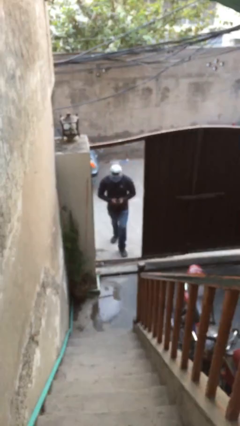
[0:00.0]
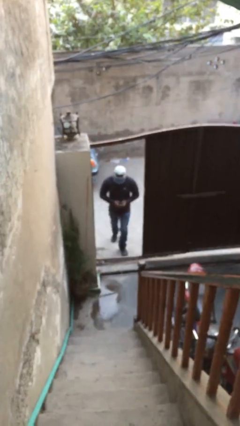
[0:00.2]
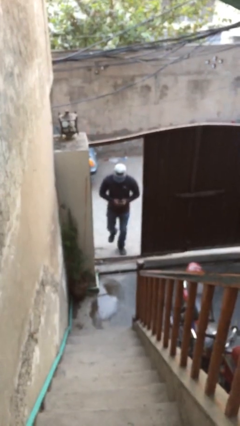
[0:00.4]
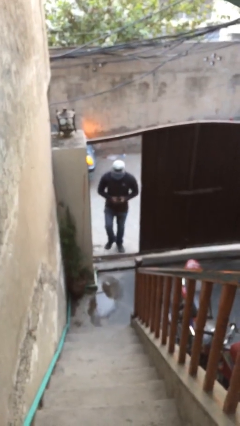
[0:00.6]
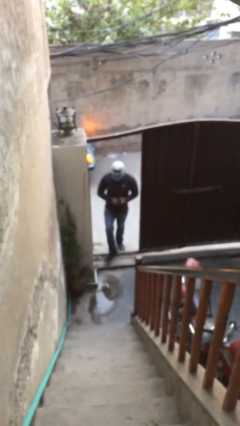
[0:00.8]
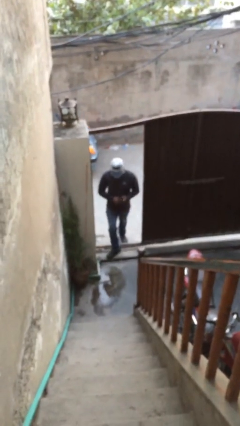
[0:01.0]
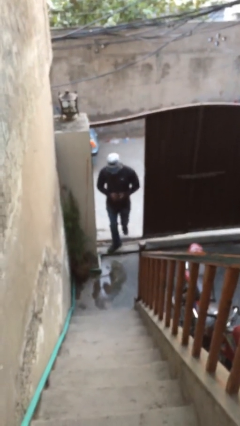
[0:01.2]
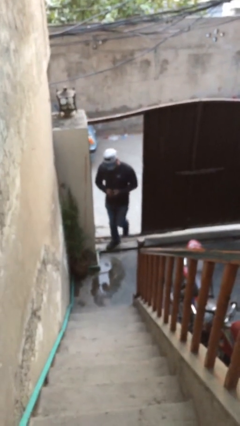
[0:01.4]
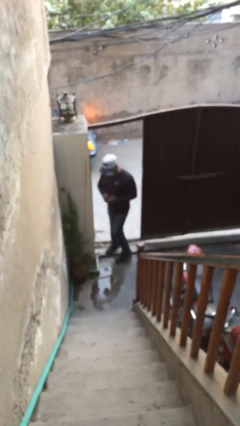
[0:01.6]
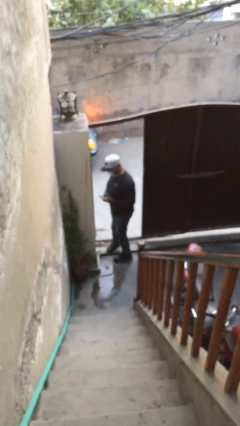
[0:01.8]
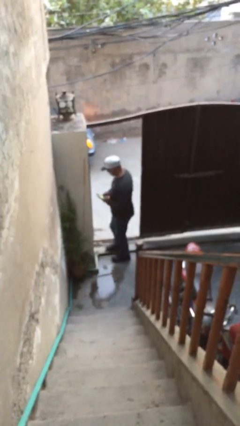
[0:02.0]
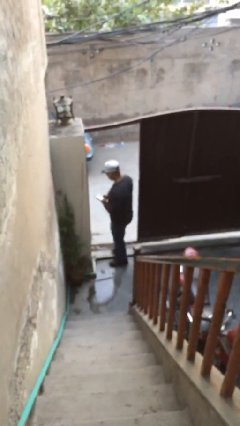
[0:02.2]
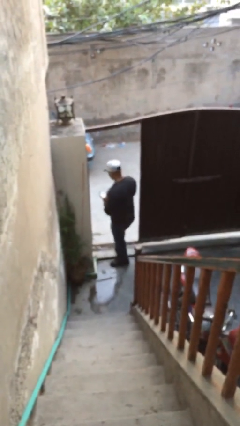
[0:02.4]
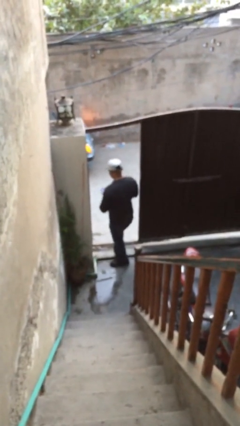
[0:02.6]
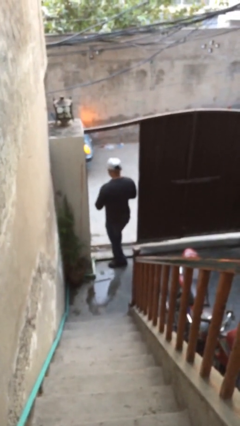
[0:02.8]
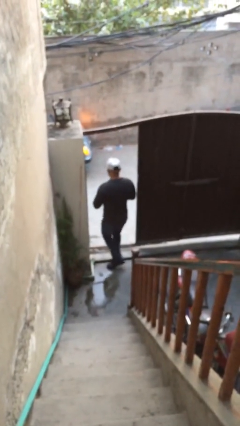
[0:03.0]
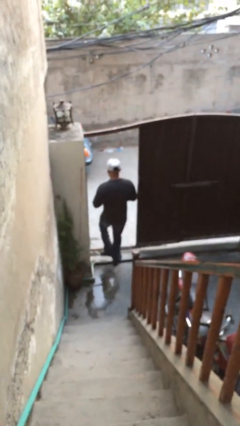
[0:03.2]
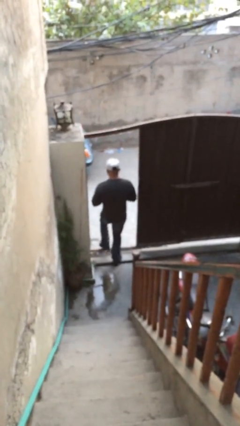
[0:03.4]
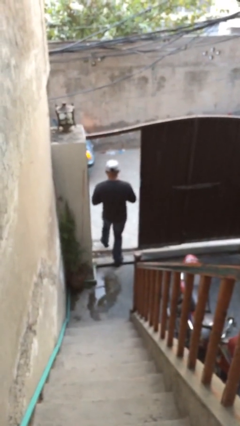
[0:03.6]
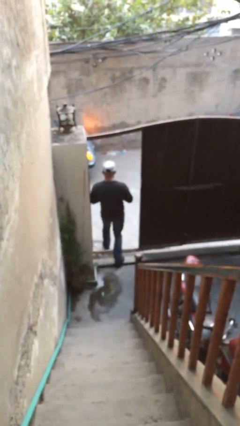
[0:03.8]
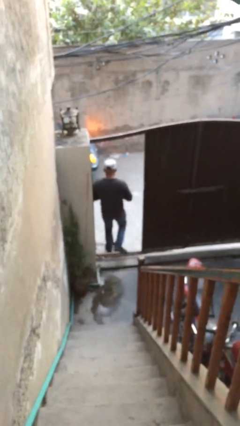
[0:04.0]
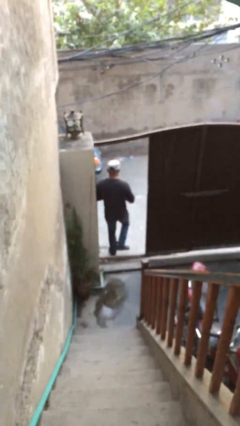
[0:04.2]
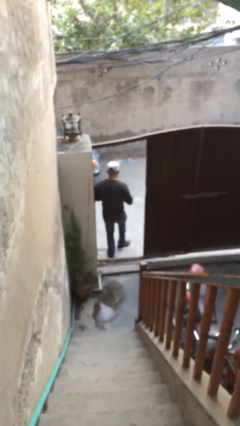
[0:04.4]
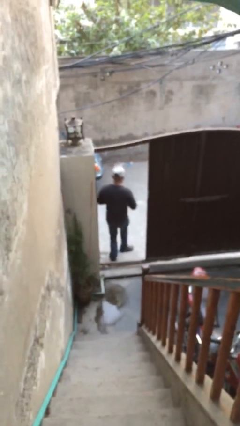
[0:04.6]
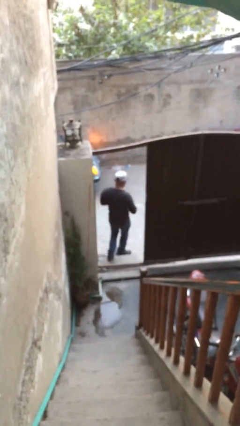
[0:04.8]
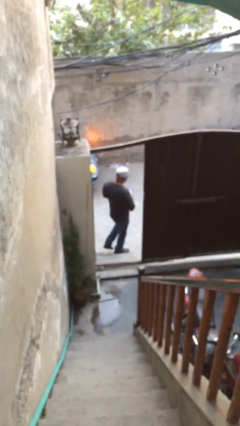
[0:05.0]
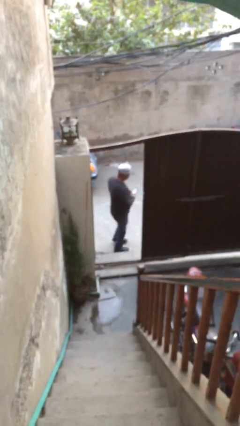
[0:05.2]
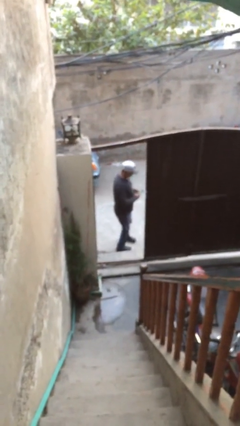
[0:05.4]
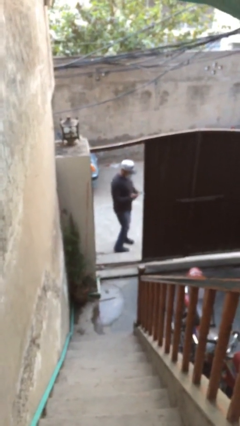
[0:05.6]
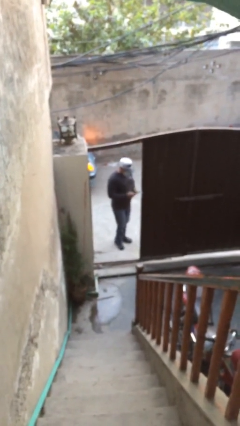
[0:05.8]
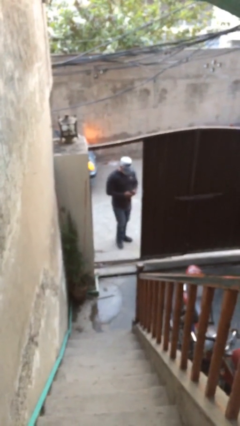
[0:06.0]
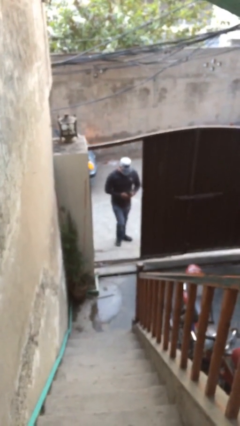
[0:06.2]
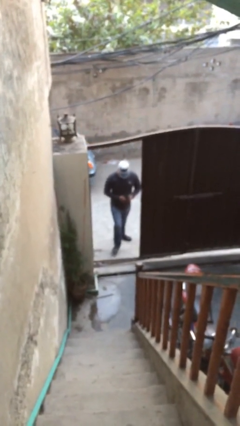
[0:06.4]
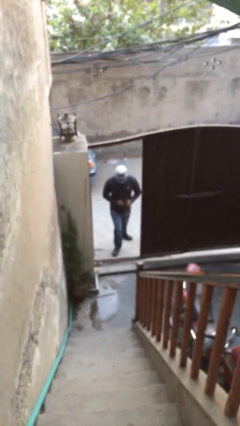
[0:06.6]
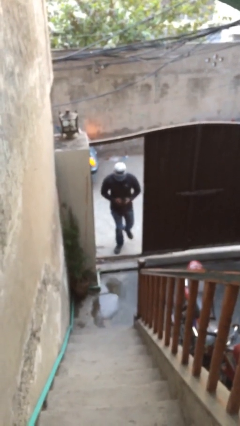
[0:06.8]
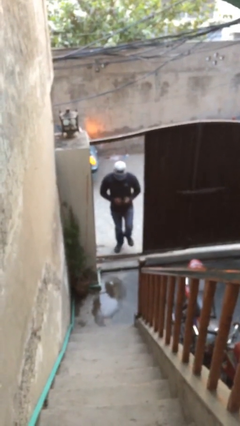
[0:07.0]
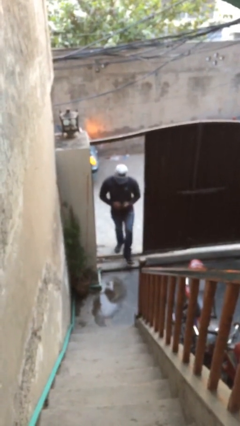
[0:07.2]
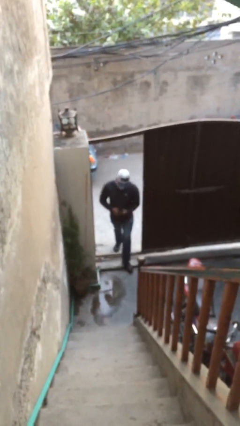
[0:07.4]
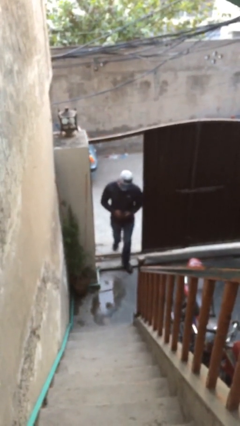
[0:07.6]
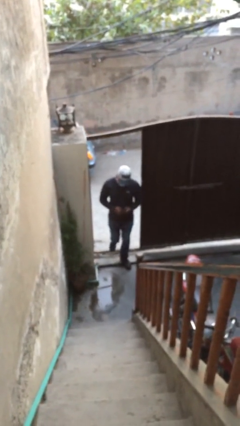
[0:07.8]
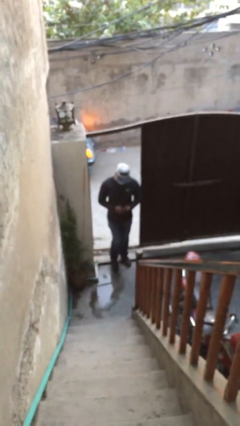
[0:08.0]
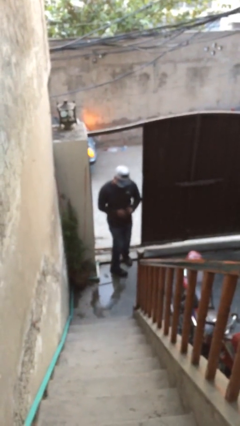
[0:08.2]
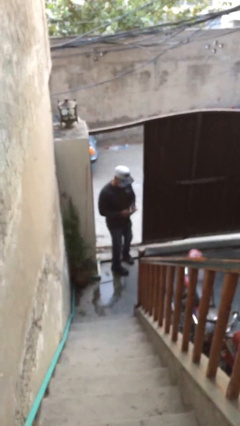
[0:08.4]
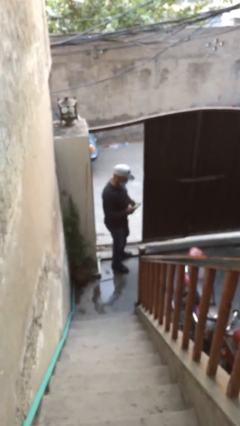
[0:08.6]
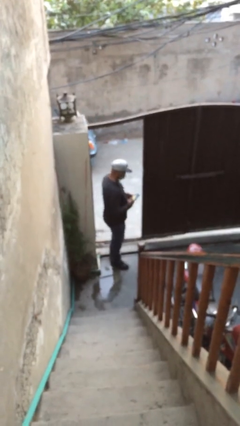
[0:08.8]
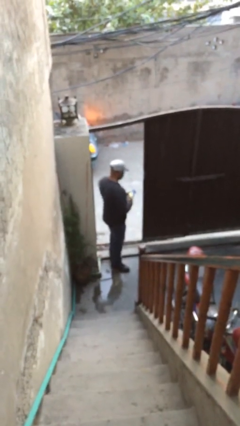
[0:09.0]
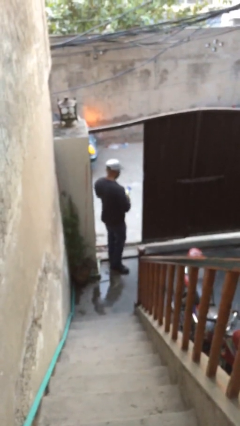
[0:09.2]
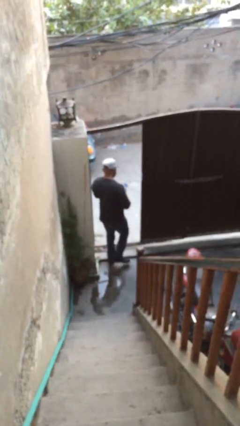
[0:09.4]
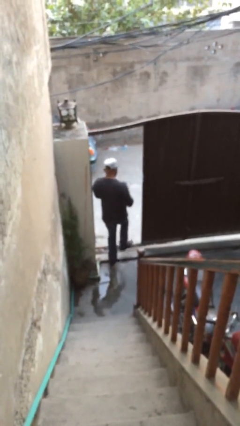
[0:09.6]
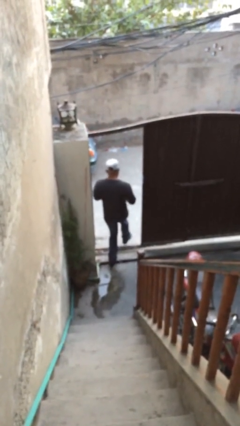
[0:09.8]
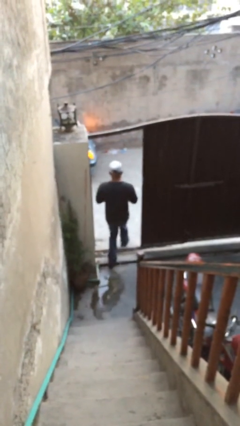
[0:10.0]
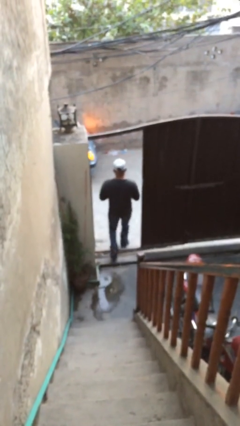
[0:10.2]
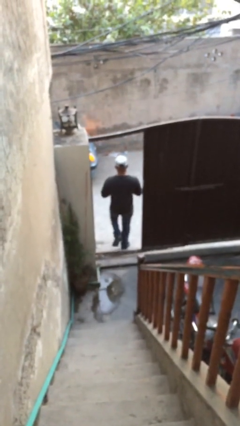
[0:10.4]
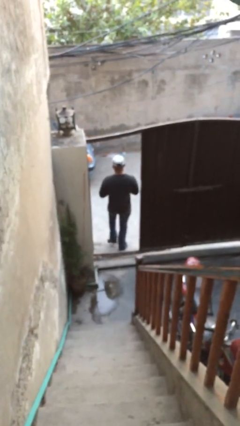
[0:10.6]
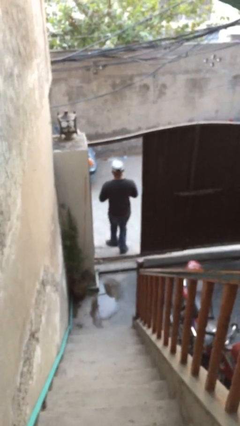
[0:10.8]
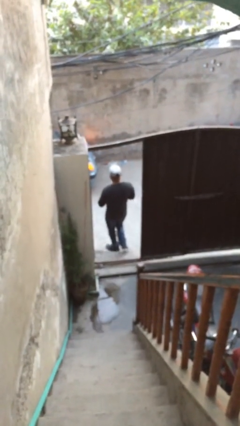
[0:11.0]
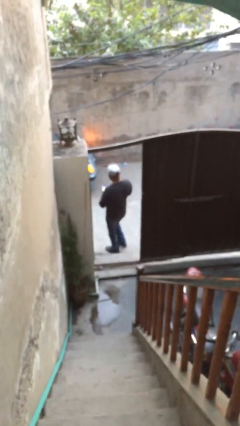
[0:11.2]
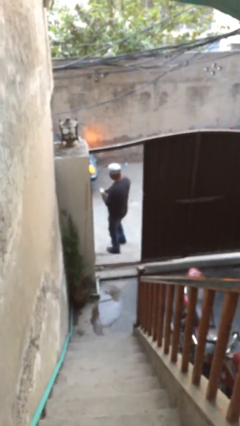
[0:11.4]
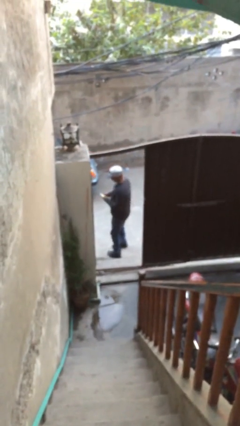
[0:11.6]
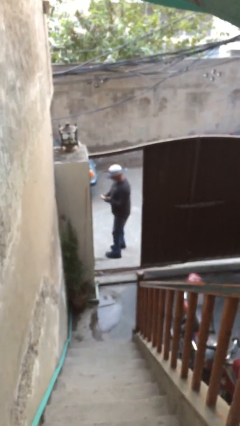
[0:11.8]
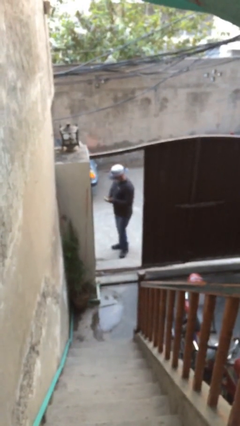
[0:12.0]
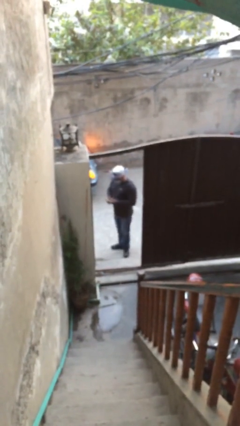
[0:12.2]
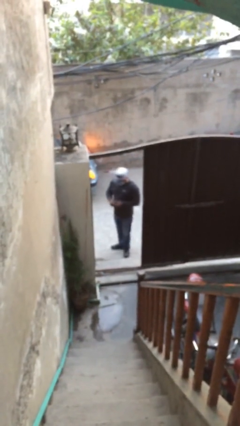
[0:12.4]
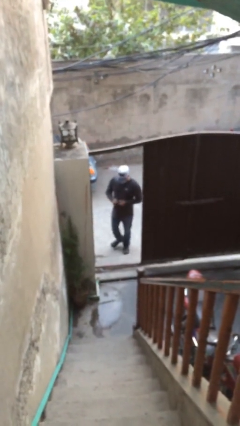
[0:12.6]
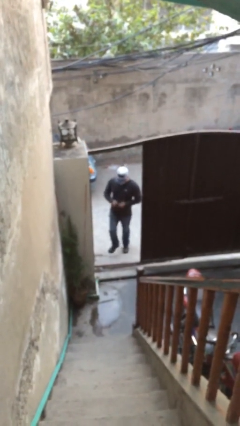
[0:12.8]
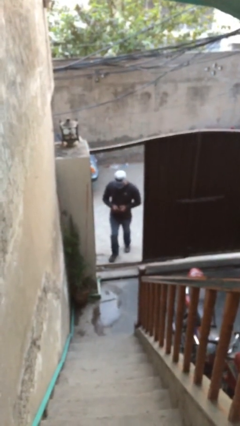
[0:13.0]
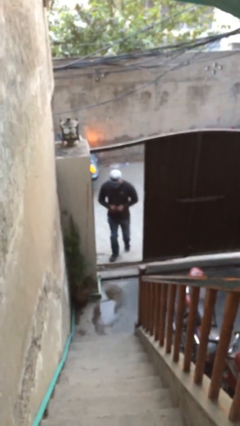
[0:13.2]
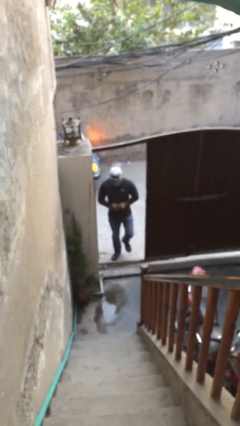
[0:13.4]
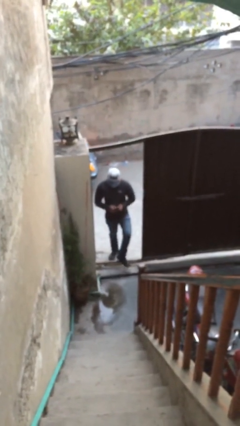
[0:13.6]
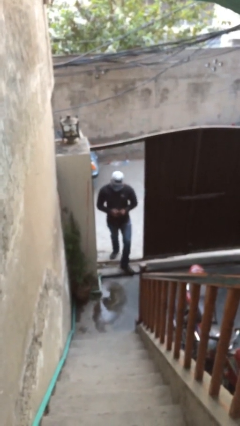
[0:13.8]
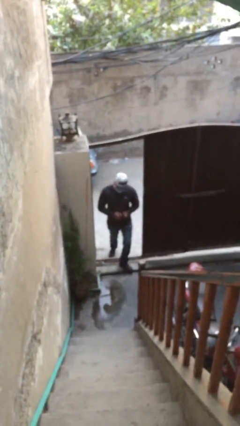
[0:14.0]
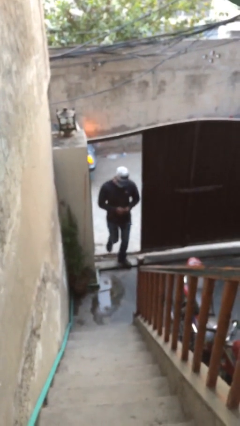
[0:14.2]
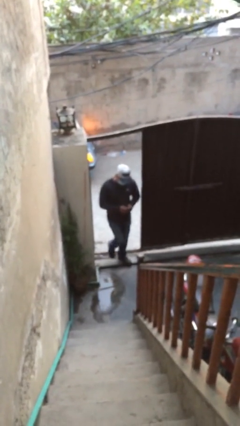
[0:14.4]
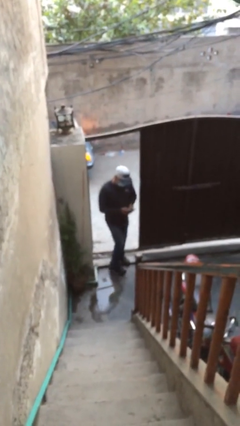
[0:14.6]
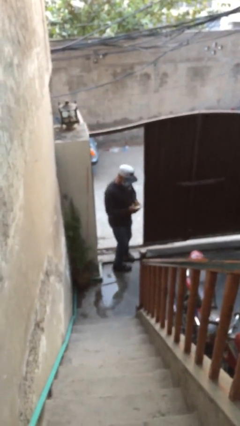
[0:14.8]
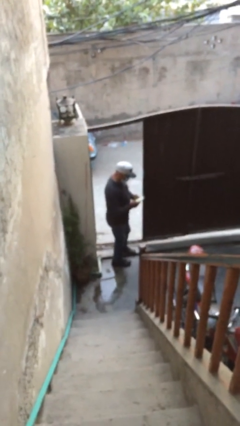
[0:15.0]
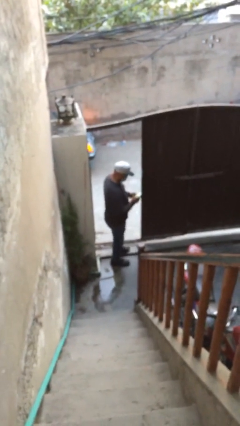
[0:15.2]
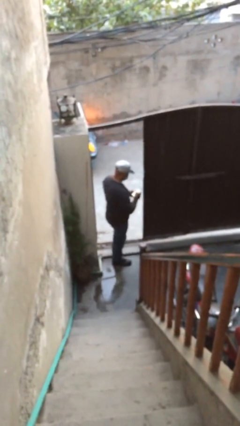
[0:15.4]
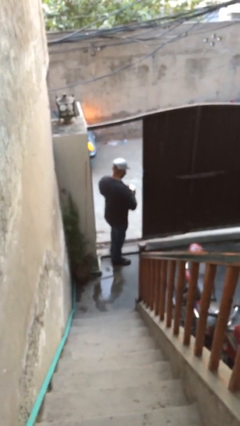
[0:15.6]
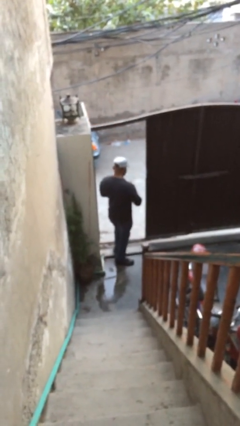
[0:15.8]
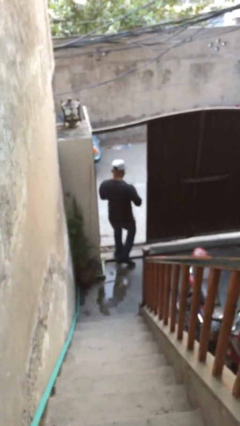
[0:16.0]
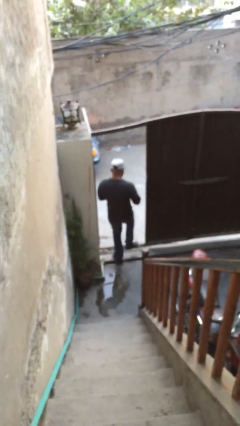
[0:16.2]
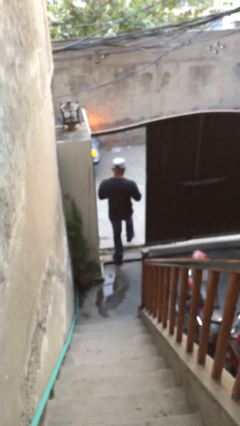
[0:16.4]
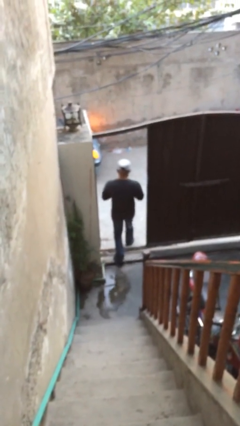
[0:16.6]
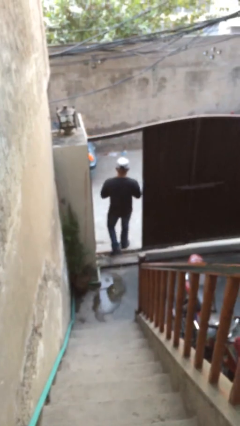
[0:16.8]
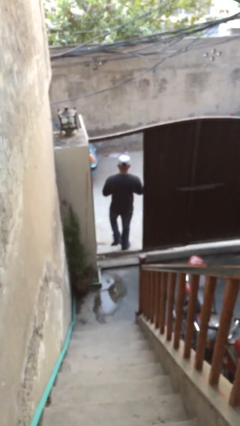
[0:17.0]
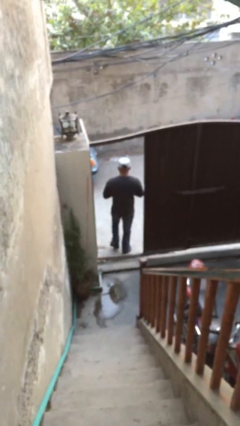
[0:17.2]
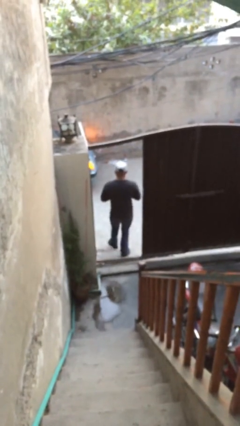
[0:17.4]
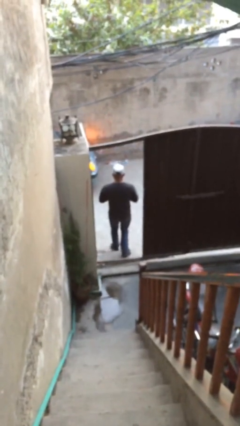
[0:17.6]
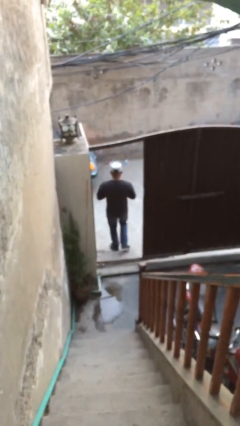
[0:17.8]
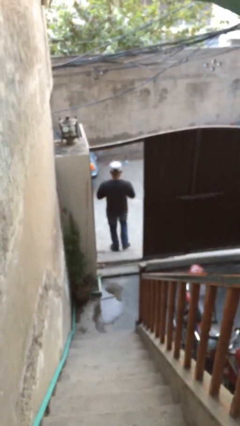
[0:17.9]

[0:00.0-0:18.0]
person texts on phone

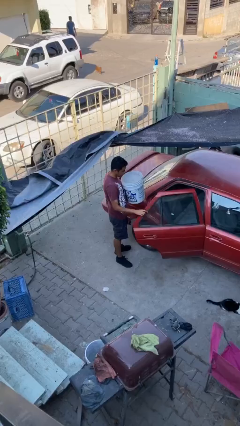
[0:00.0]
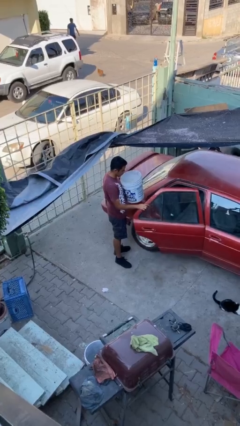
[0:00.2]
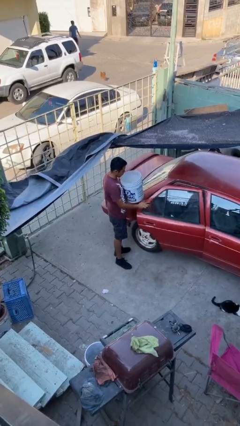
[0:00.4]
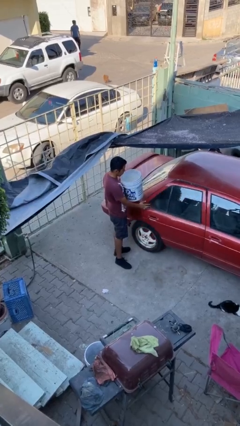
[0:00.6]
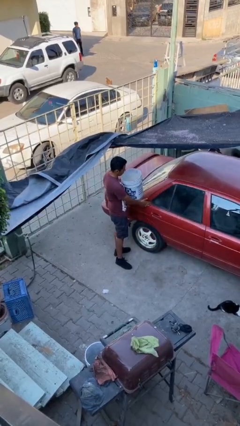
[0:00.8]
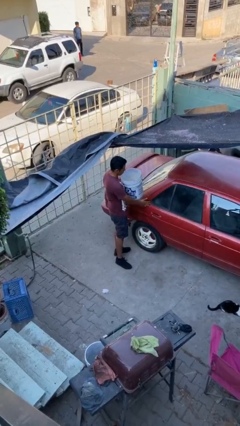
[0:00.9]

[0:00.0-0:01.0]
person closes car door
